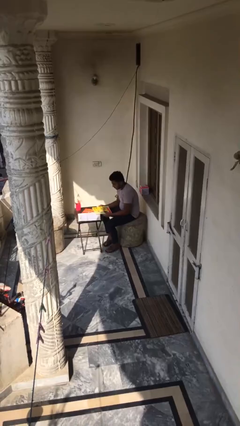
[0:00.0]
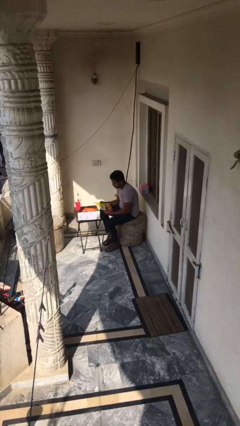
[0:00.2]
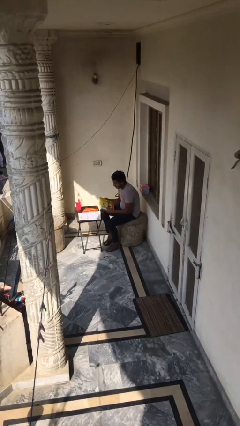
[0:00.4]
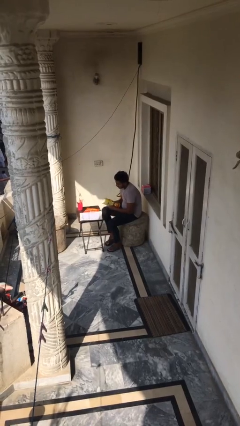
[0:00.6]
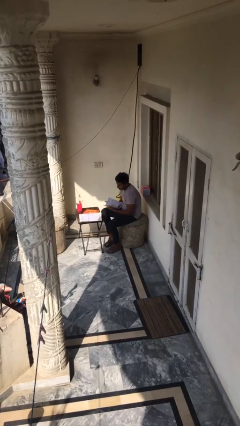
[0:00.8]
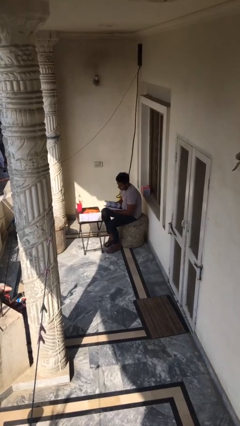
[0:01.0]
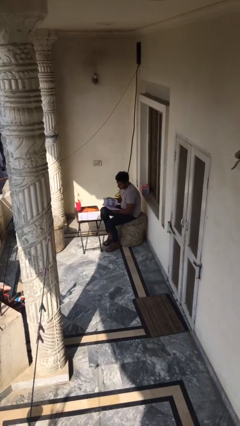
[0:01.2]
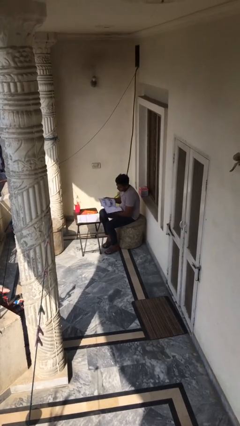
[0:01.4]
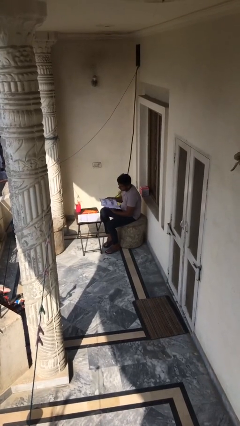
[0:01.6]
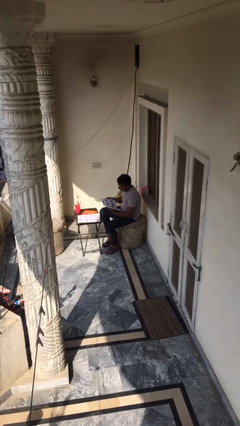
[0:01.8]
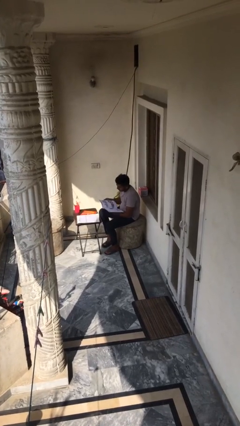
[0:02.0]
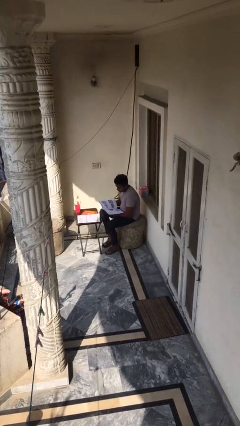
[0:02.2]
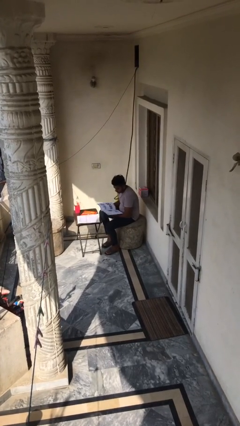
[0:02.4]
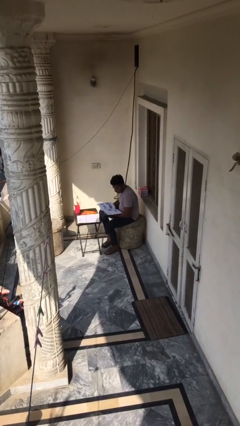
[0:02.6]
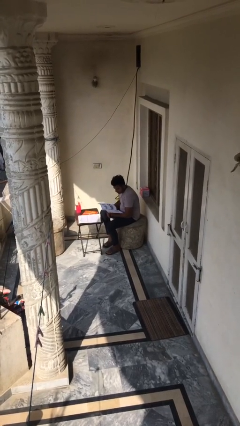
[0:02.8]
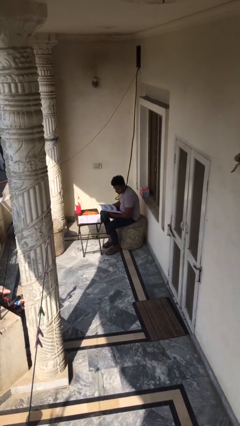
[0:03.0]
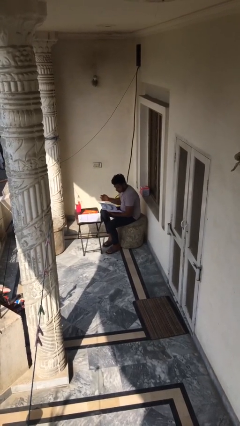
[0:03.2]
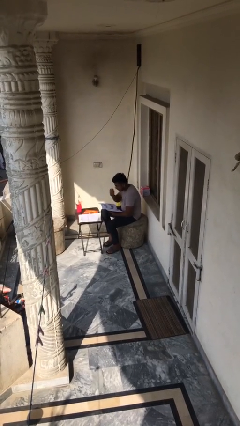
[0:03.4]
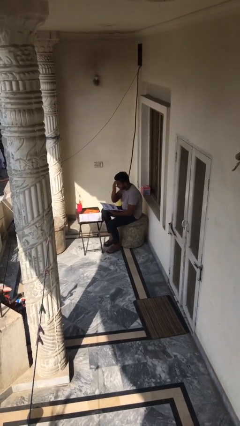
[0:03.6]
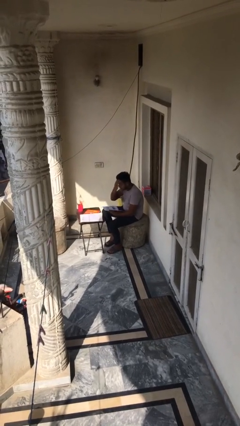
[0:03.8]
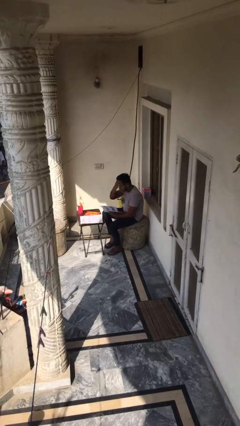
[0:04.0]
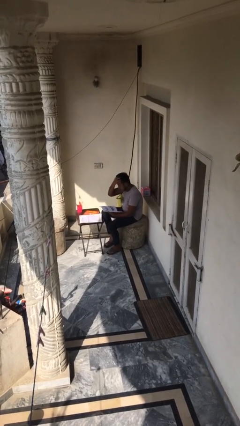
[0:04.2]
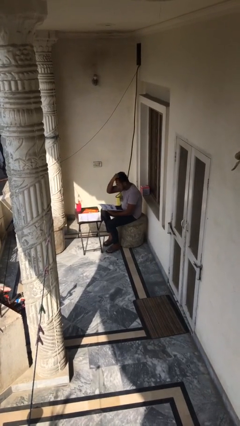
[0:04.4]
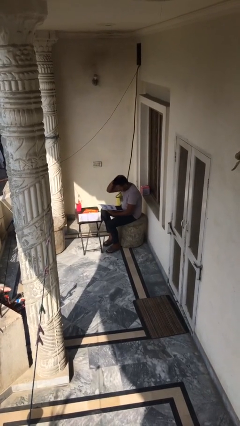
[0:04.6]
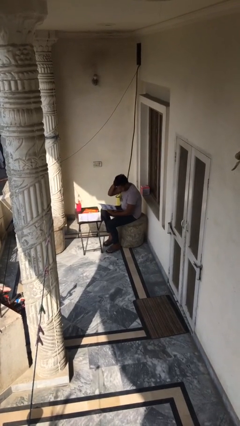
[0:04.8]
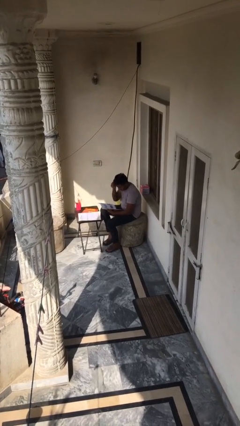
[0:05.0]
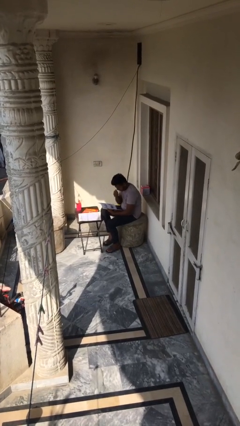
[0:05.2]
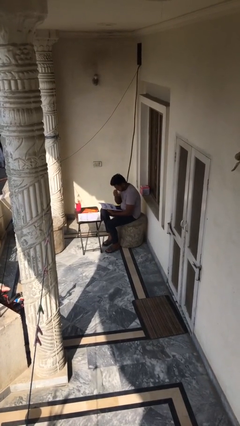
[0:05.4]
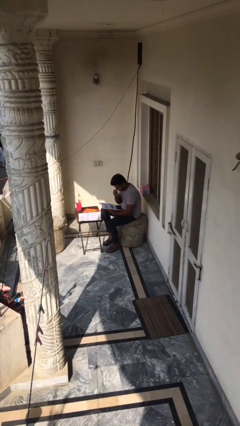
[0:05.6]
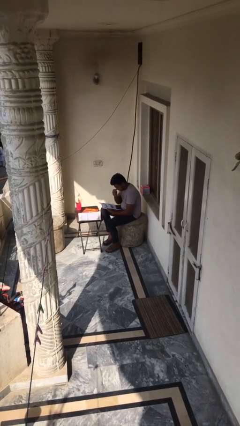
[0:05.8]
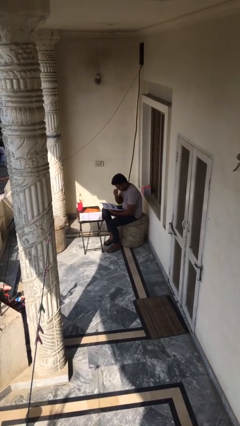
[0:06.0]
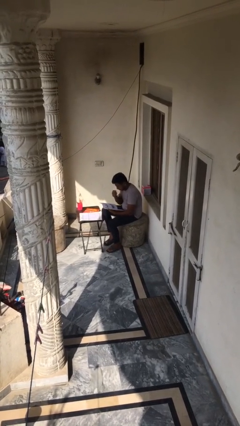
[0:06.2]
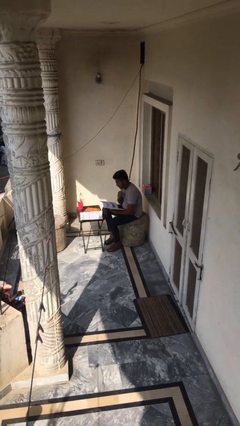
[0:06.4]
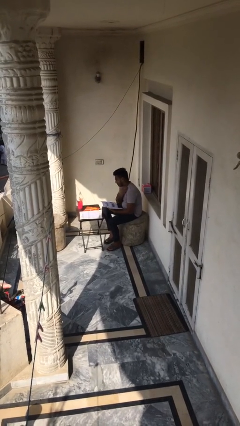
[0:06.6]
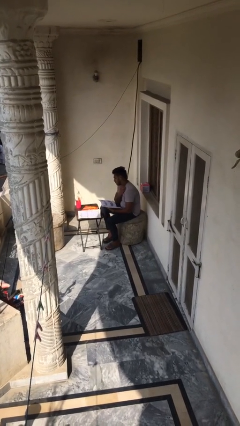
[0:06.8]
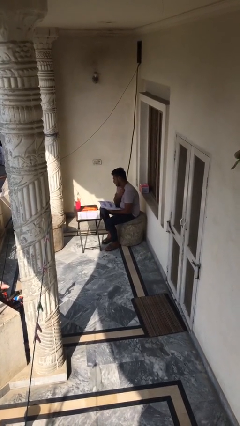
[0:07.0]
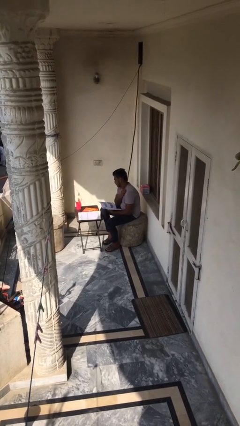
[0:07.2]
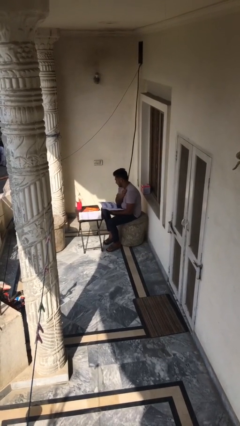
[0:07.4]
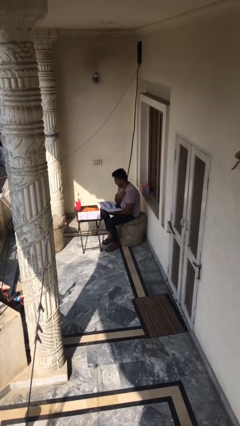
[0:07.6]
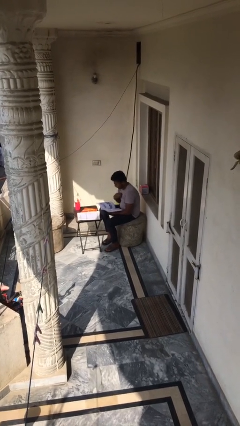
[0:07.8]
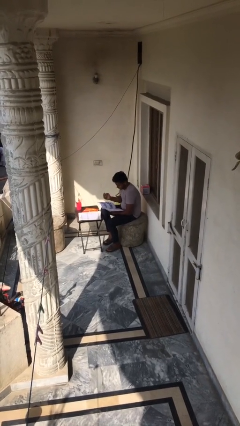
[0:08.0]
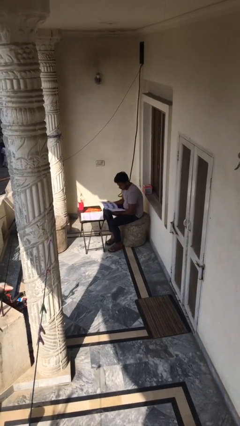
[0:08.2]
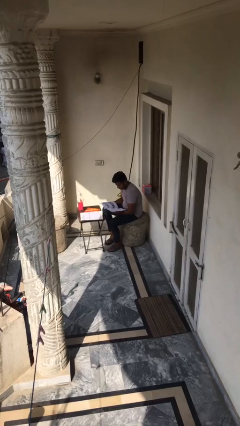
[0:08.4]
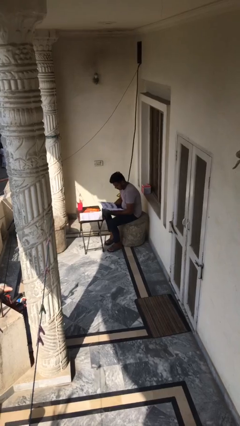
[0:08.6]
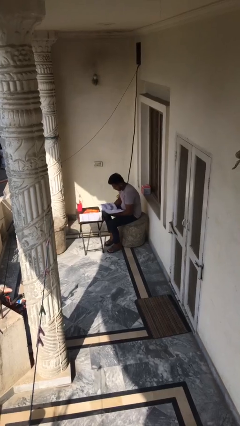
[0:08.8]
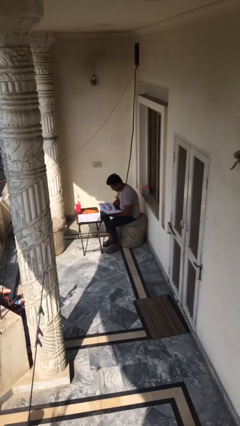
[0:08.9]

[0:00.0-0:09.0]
person reads document

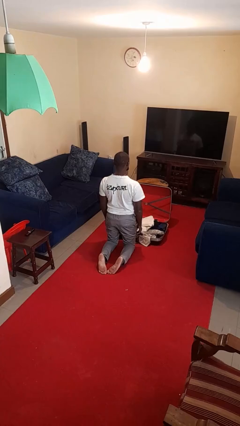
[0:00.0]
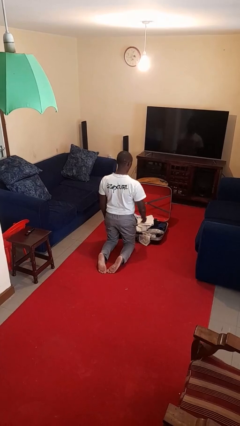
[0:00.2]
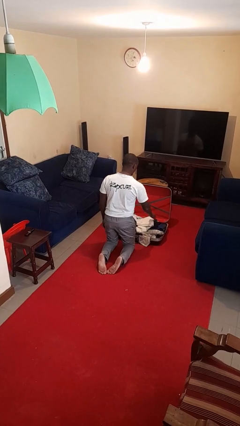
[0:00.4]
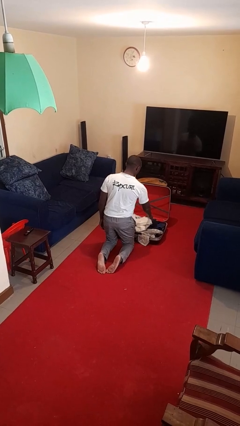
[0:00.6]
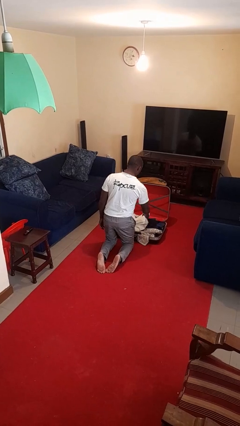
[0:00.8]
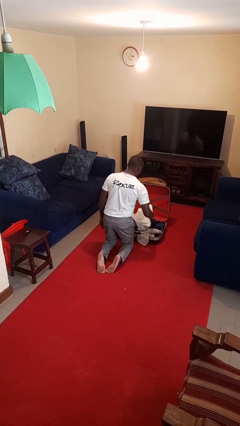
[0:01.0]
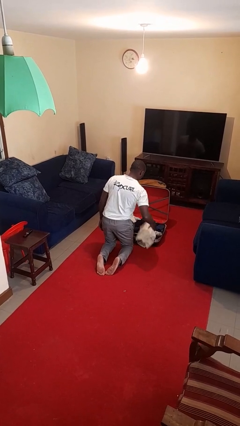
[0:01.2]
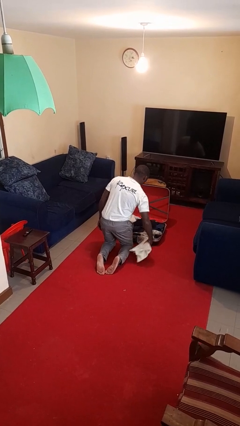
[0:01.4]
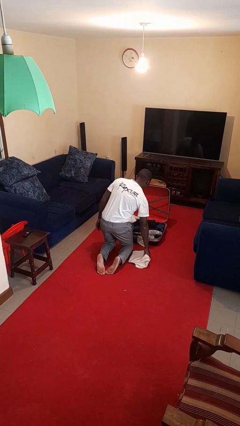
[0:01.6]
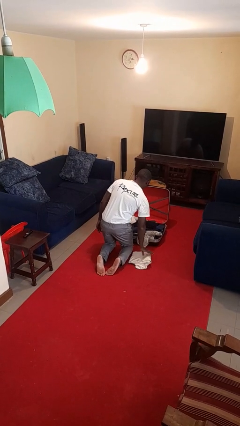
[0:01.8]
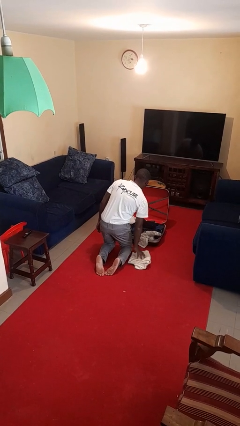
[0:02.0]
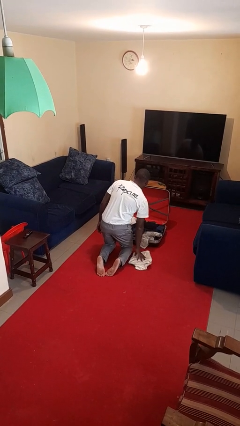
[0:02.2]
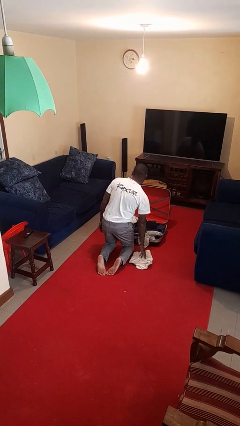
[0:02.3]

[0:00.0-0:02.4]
person unloads clothes from suitcase

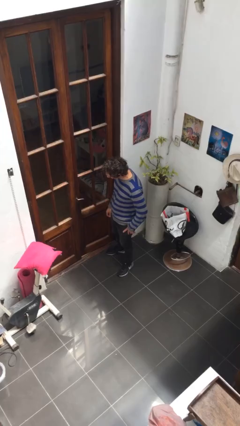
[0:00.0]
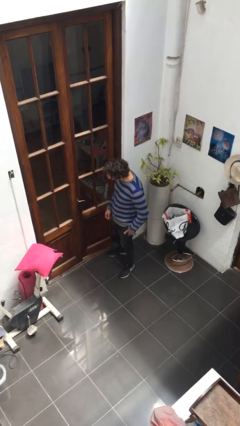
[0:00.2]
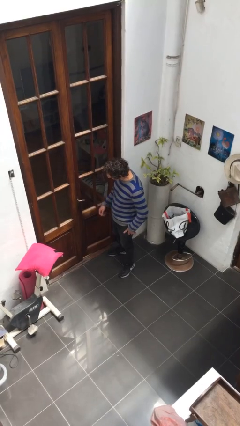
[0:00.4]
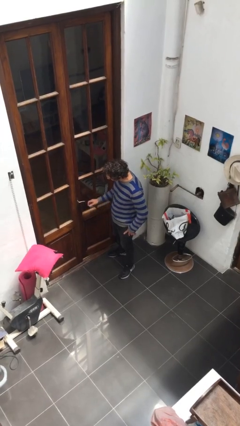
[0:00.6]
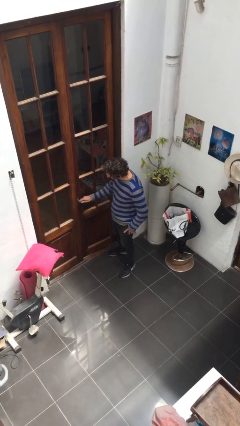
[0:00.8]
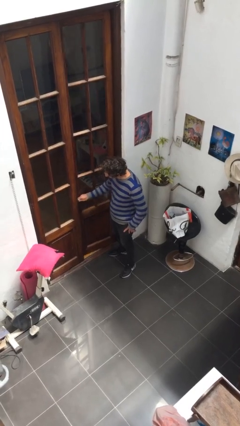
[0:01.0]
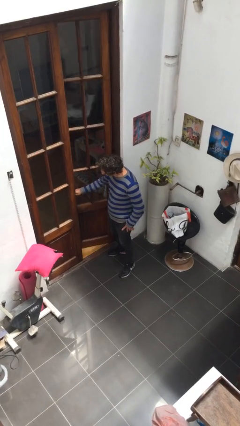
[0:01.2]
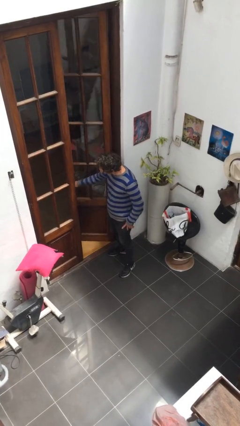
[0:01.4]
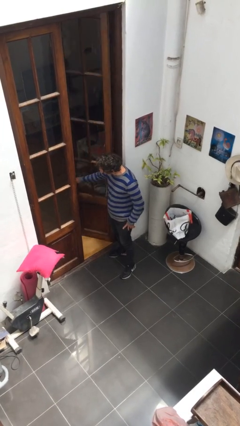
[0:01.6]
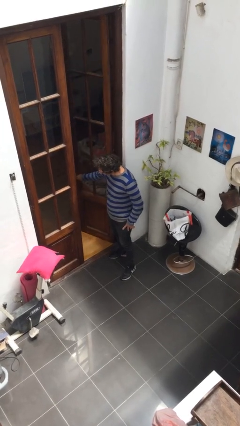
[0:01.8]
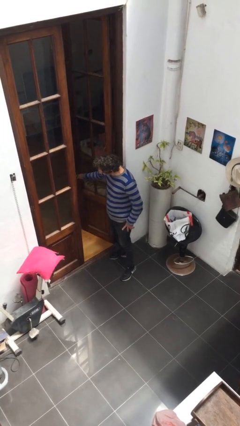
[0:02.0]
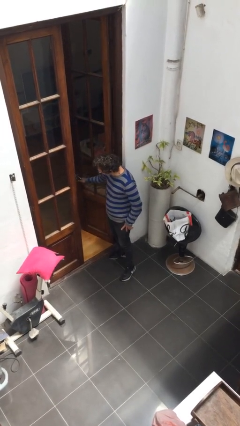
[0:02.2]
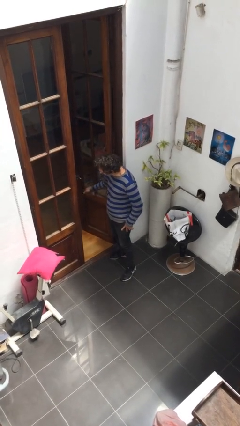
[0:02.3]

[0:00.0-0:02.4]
person opens facility door

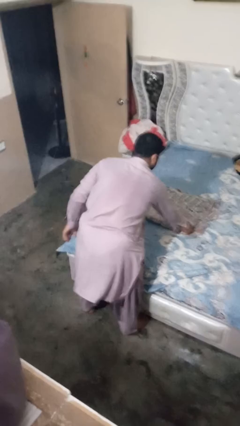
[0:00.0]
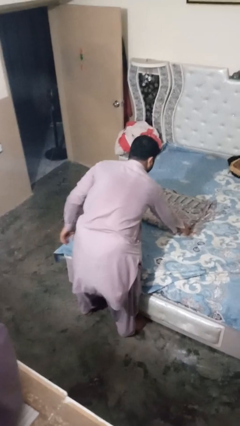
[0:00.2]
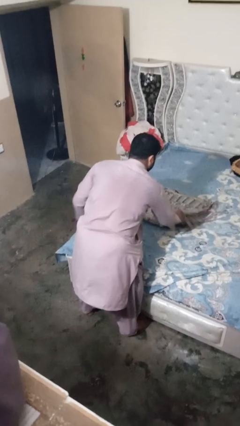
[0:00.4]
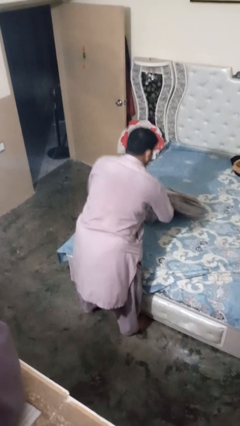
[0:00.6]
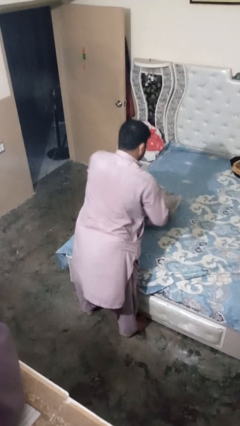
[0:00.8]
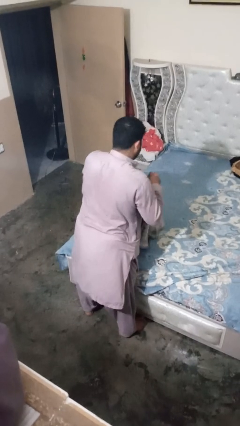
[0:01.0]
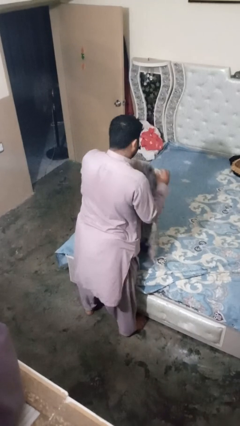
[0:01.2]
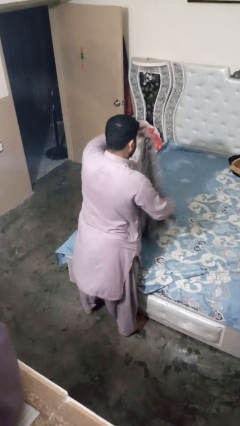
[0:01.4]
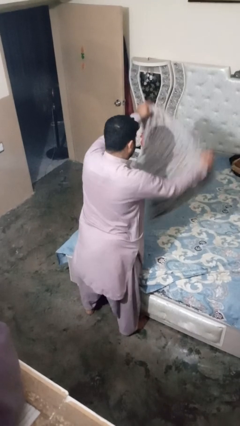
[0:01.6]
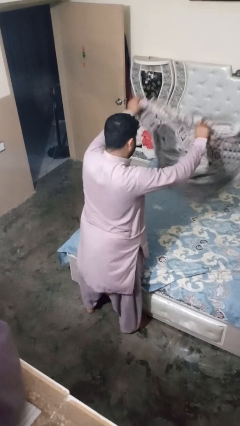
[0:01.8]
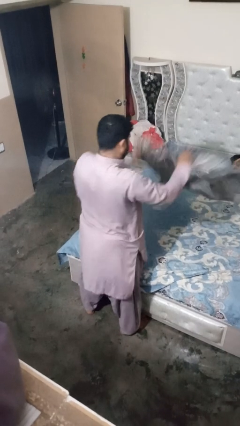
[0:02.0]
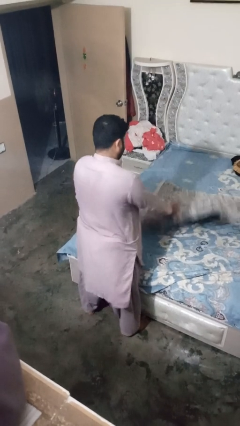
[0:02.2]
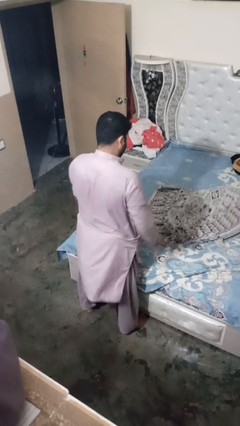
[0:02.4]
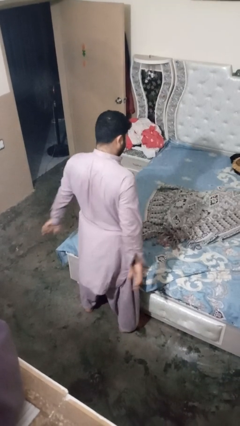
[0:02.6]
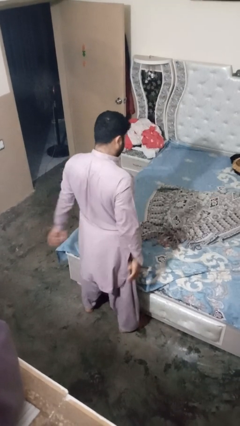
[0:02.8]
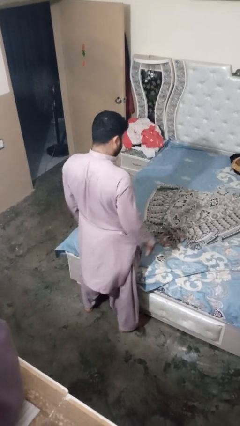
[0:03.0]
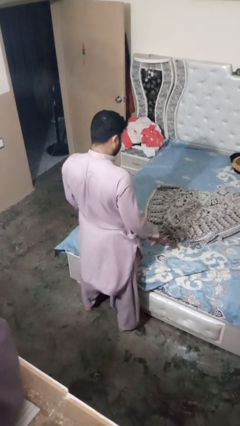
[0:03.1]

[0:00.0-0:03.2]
person unfolds blanket

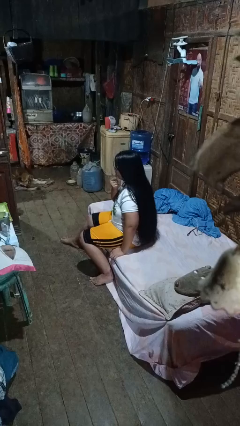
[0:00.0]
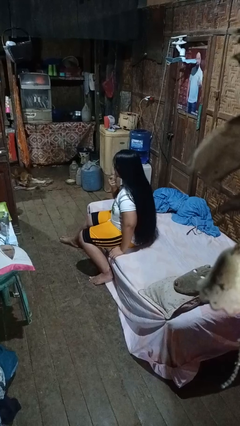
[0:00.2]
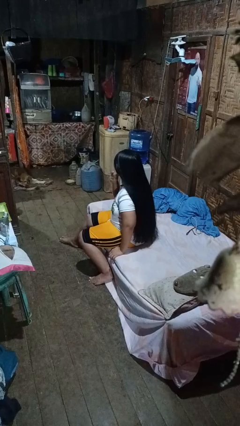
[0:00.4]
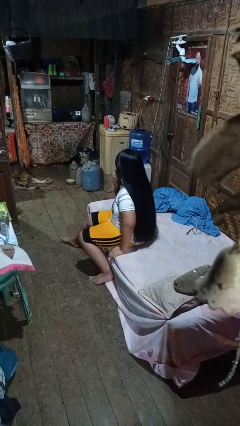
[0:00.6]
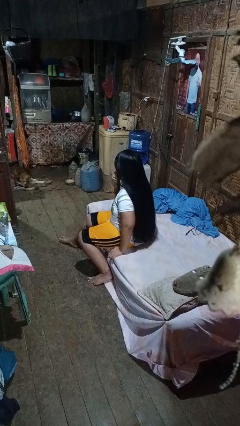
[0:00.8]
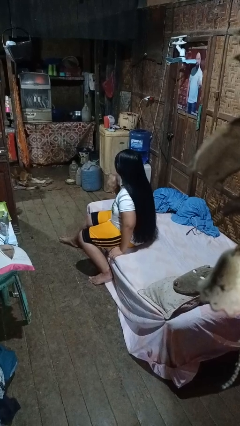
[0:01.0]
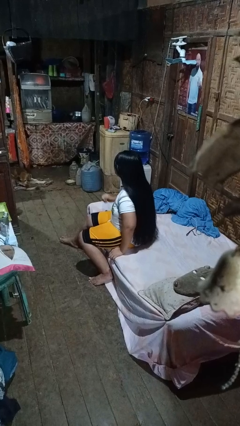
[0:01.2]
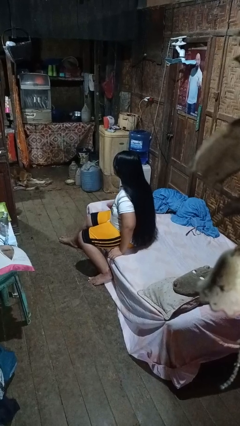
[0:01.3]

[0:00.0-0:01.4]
person strokes chin
